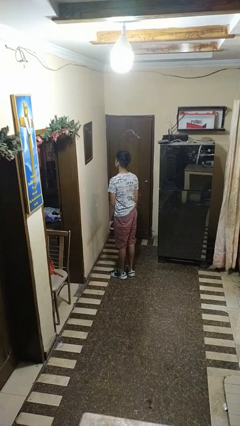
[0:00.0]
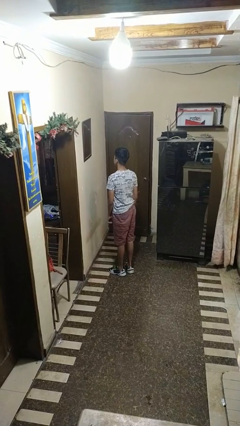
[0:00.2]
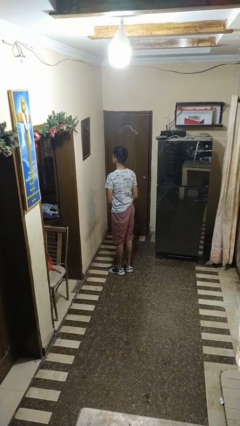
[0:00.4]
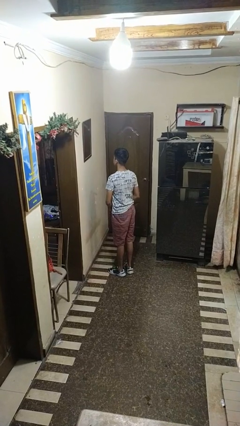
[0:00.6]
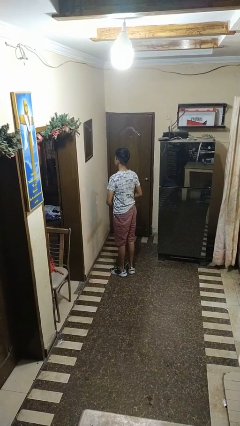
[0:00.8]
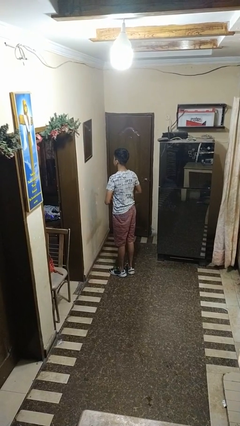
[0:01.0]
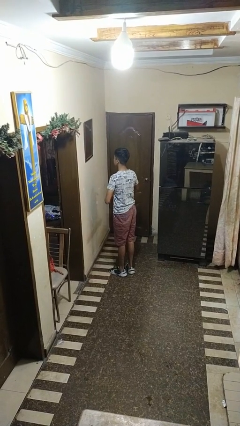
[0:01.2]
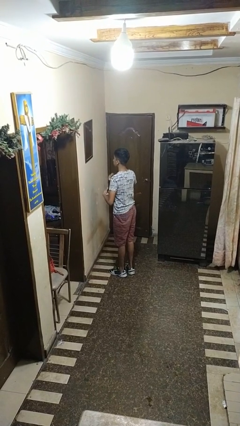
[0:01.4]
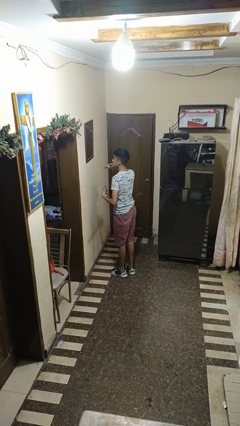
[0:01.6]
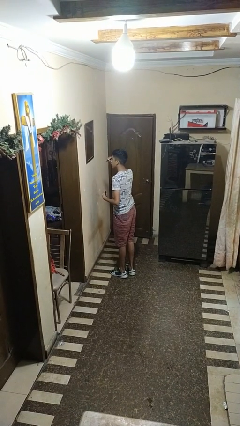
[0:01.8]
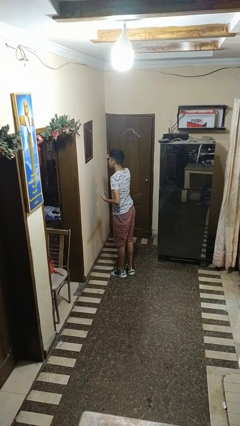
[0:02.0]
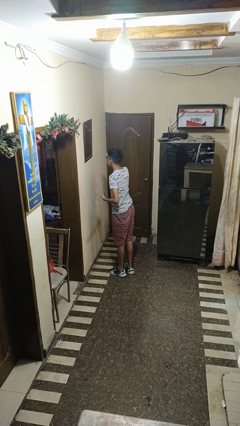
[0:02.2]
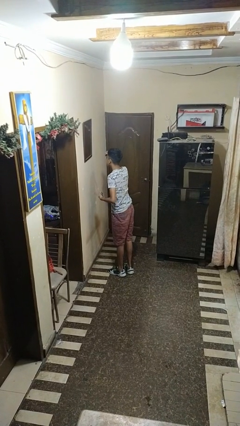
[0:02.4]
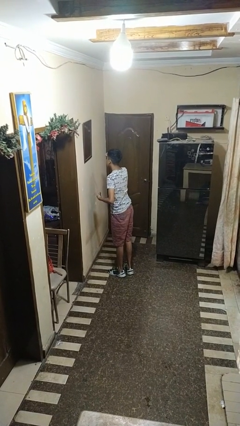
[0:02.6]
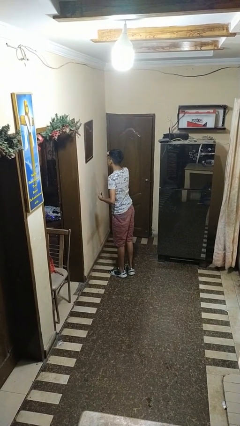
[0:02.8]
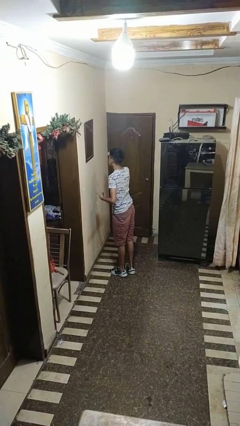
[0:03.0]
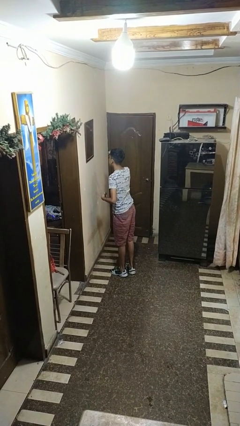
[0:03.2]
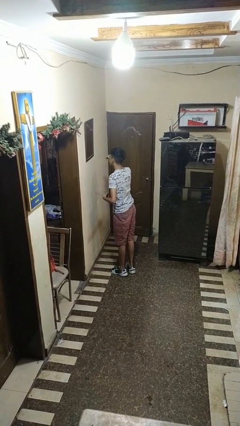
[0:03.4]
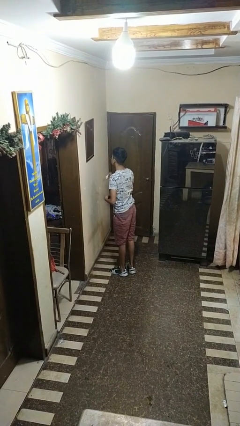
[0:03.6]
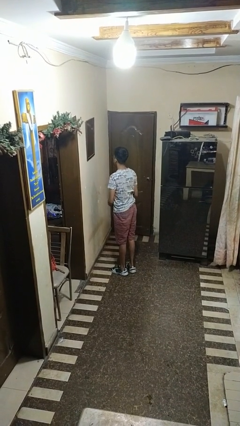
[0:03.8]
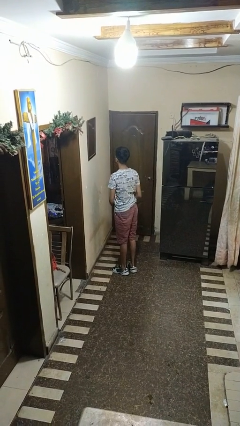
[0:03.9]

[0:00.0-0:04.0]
person applies eye makeup

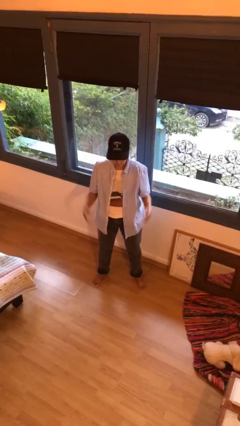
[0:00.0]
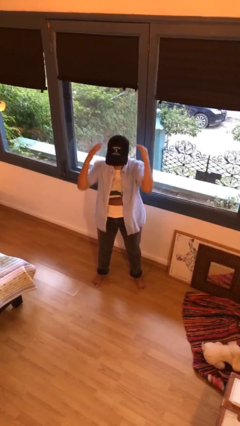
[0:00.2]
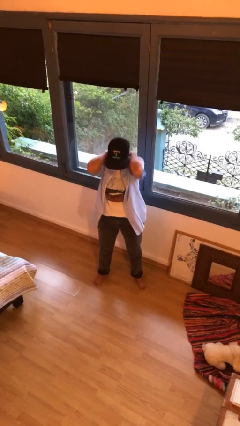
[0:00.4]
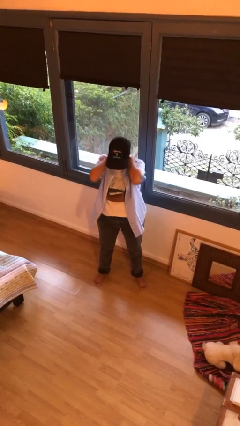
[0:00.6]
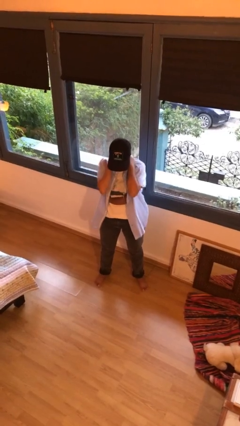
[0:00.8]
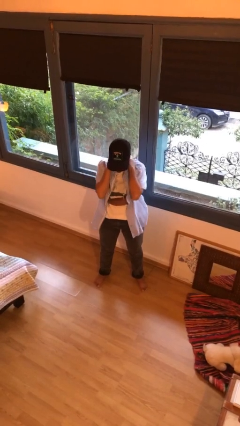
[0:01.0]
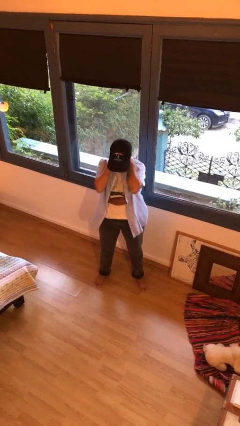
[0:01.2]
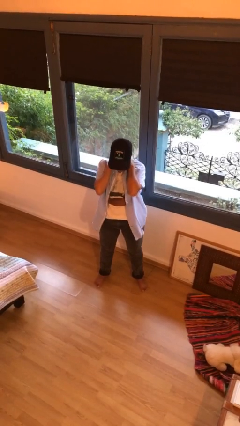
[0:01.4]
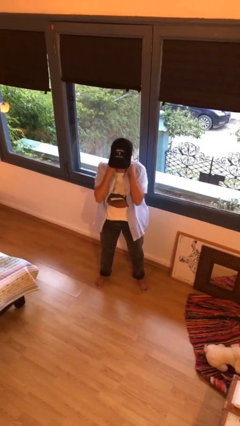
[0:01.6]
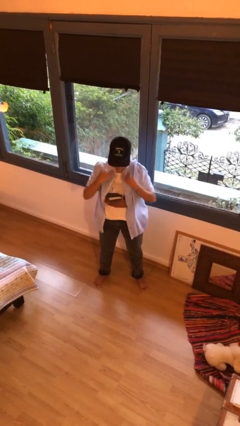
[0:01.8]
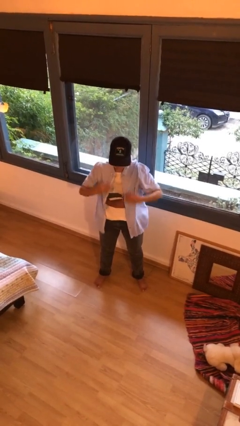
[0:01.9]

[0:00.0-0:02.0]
person rubs neck

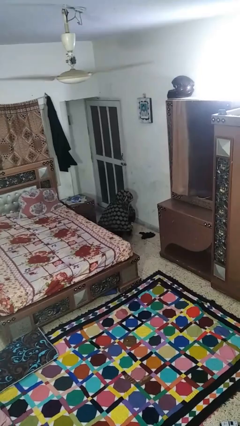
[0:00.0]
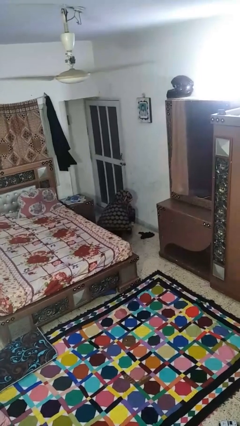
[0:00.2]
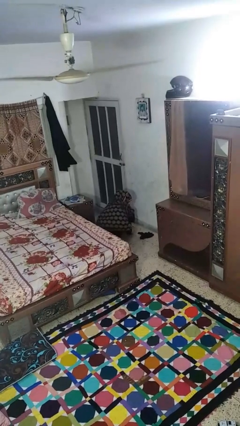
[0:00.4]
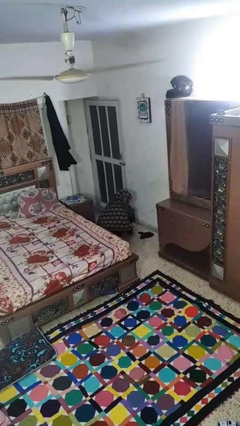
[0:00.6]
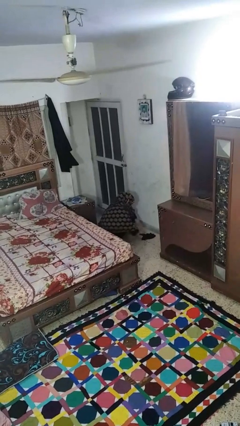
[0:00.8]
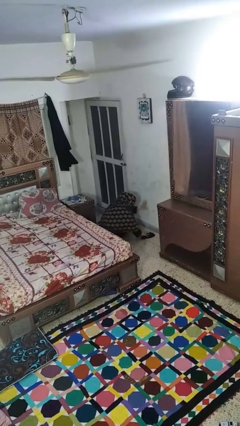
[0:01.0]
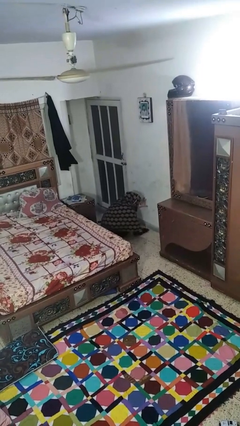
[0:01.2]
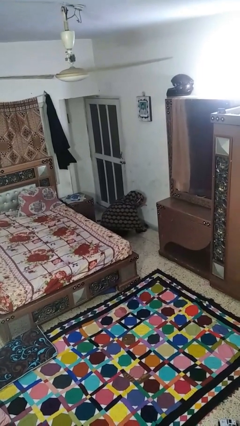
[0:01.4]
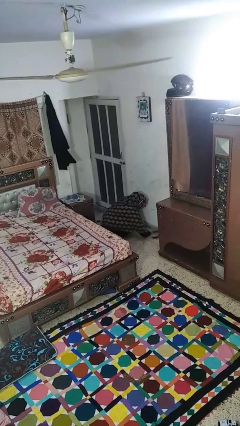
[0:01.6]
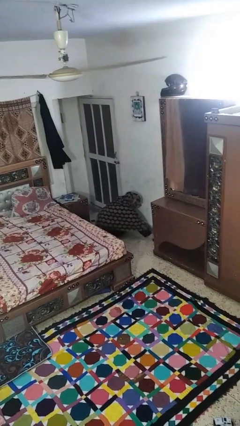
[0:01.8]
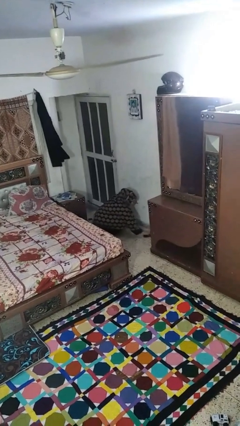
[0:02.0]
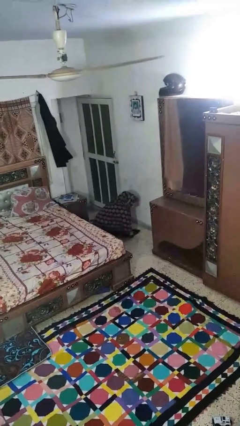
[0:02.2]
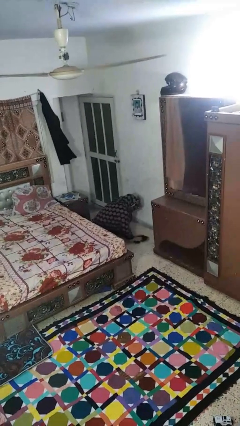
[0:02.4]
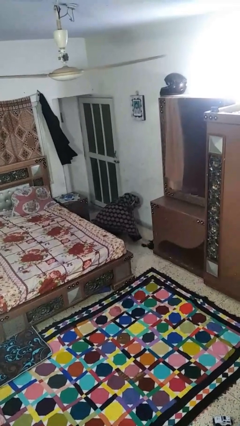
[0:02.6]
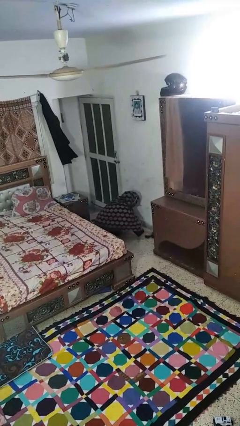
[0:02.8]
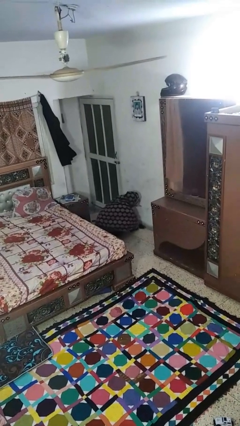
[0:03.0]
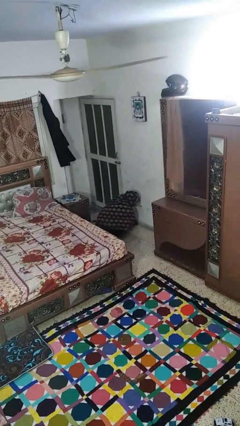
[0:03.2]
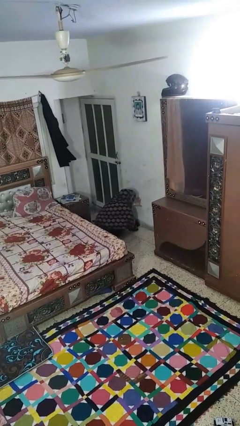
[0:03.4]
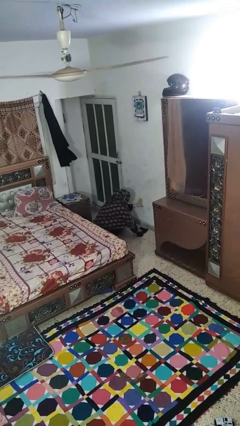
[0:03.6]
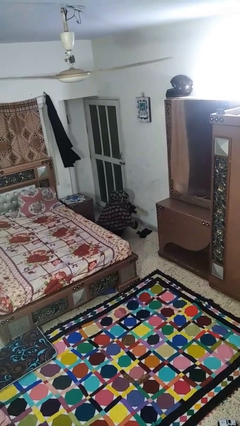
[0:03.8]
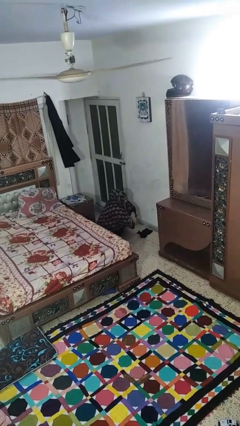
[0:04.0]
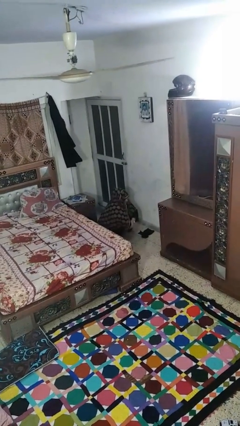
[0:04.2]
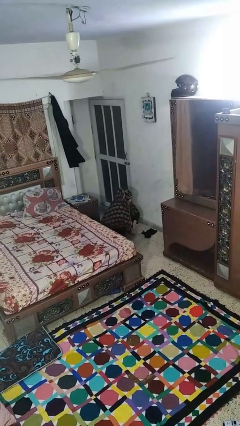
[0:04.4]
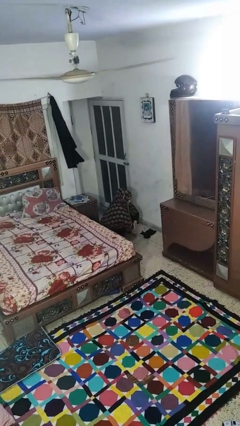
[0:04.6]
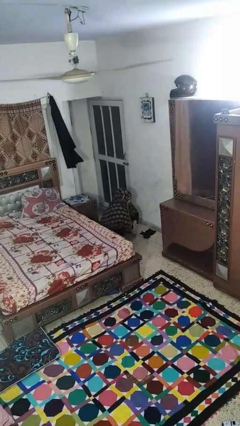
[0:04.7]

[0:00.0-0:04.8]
person mops

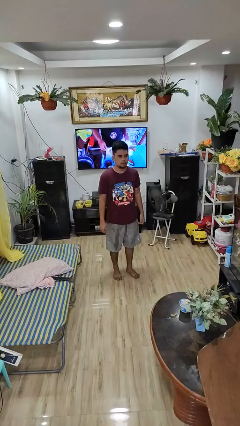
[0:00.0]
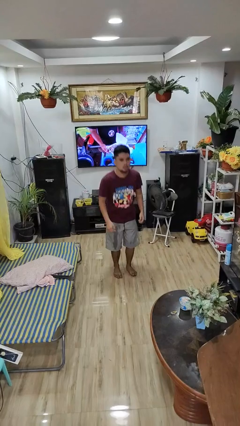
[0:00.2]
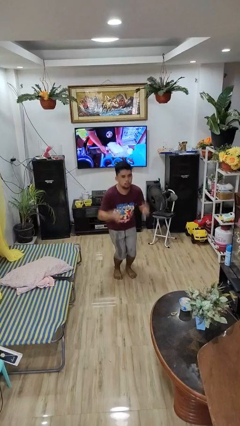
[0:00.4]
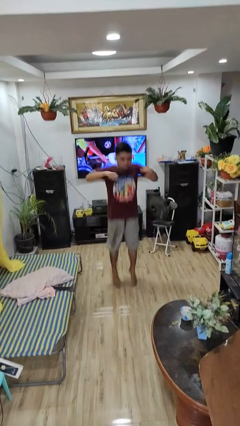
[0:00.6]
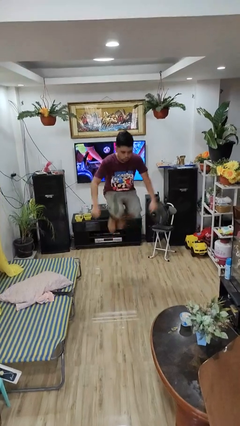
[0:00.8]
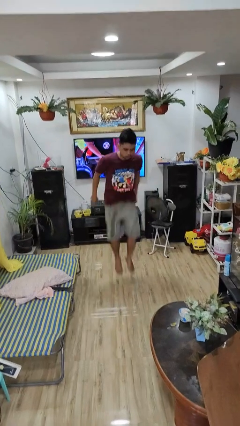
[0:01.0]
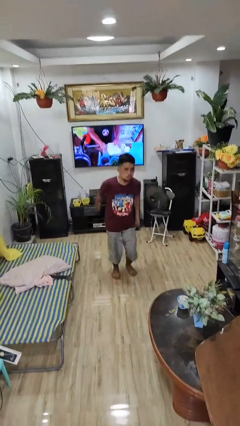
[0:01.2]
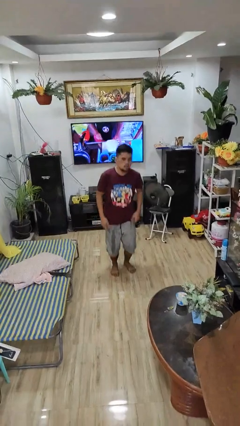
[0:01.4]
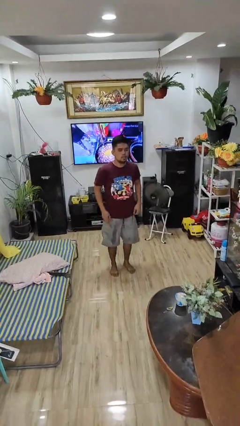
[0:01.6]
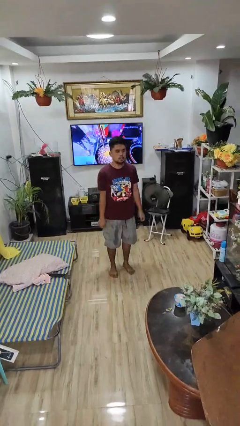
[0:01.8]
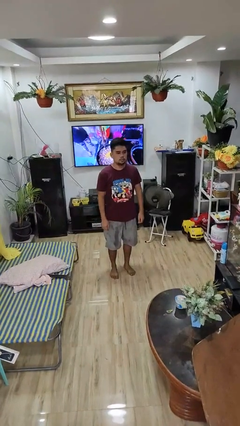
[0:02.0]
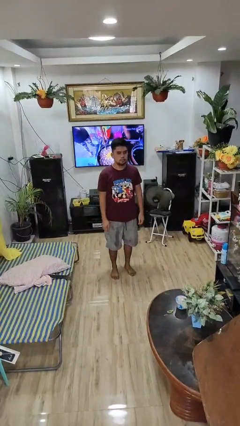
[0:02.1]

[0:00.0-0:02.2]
person jumps

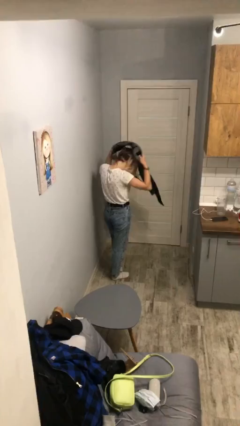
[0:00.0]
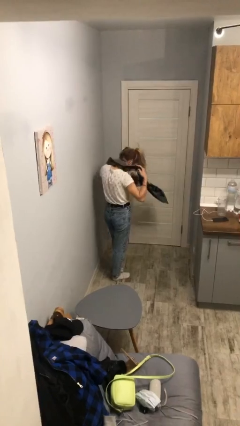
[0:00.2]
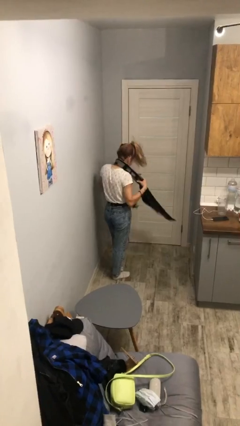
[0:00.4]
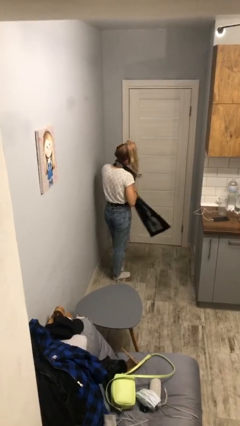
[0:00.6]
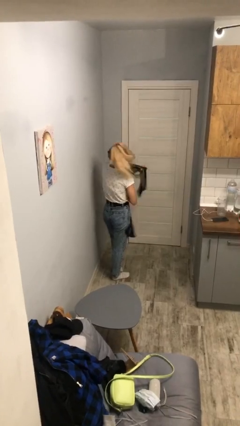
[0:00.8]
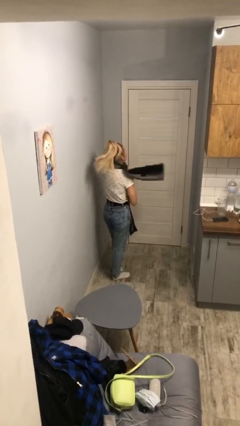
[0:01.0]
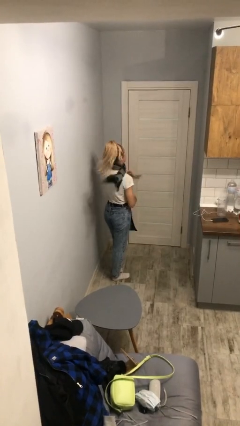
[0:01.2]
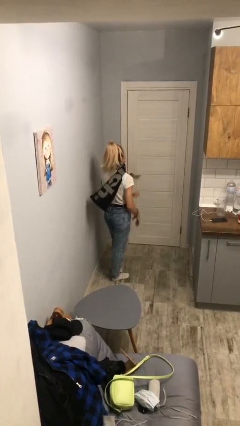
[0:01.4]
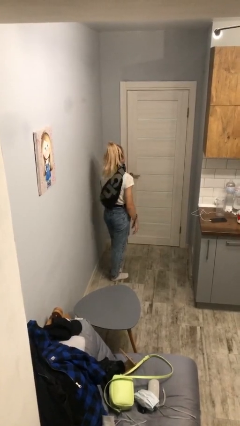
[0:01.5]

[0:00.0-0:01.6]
person puts on scarf

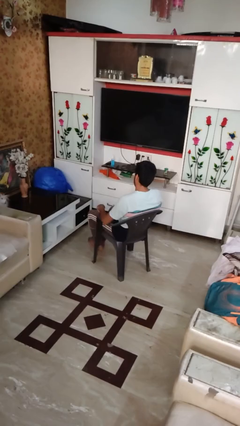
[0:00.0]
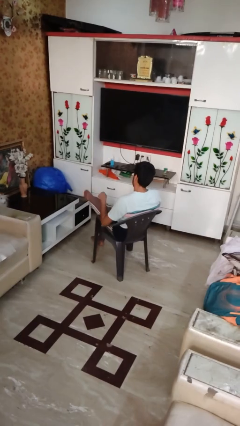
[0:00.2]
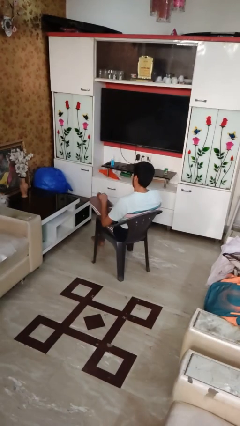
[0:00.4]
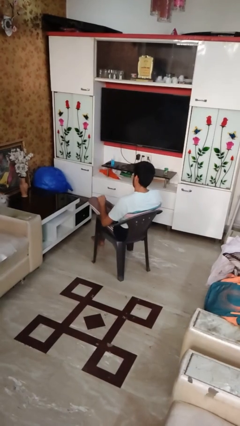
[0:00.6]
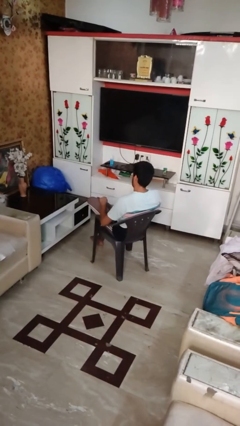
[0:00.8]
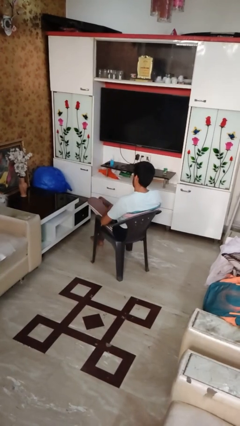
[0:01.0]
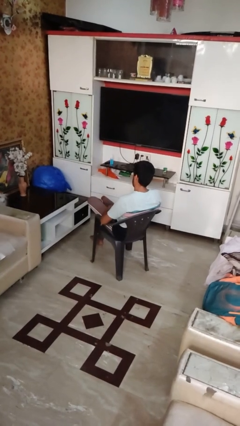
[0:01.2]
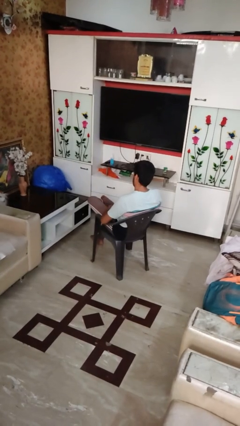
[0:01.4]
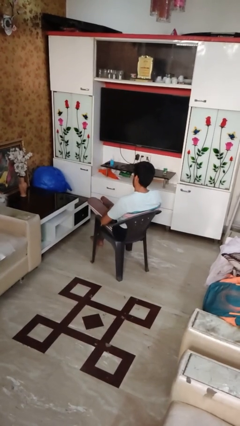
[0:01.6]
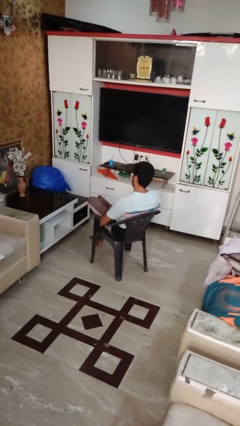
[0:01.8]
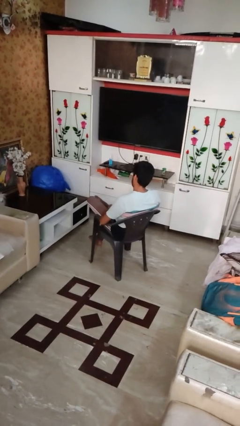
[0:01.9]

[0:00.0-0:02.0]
person crosses legs

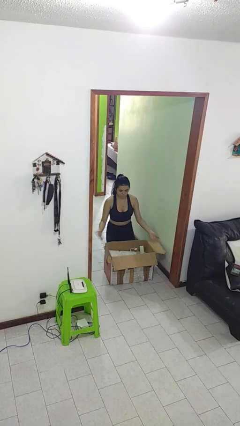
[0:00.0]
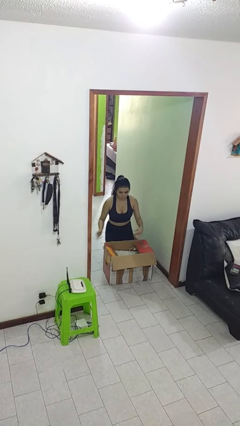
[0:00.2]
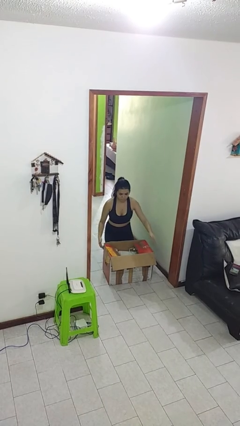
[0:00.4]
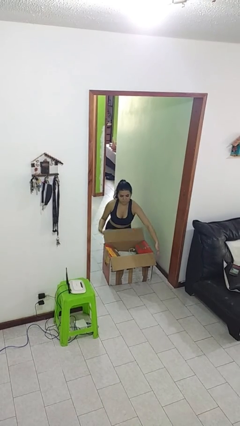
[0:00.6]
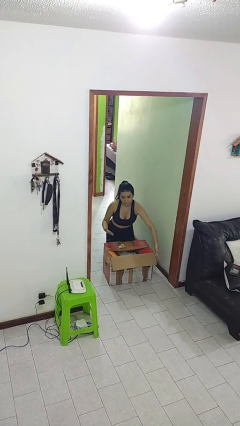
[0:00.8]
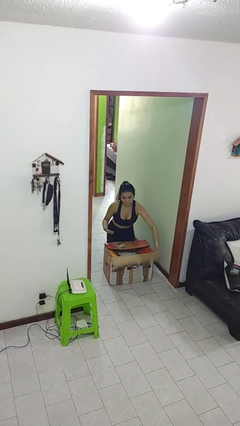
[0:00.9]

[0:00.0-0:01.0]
person closes box
